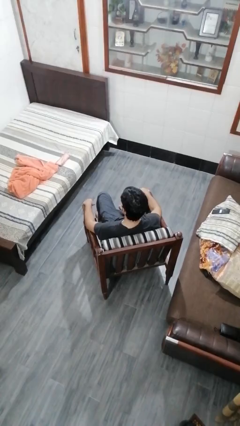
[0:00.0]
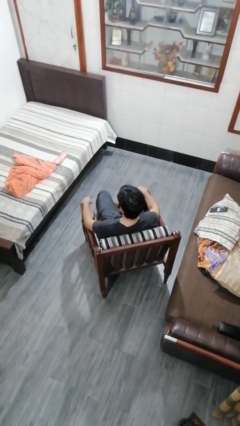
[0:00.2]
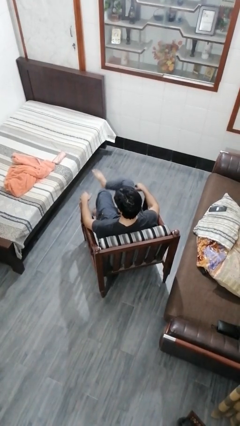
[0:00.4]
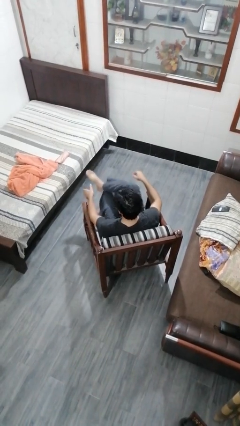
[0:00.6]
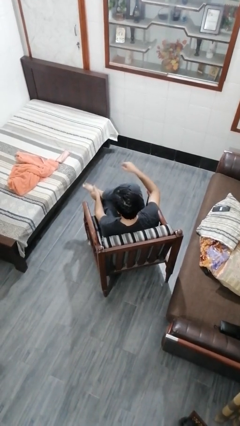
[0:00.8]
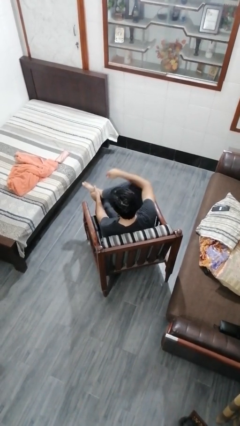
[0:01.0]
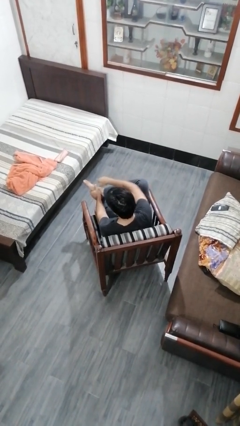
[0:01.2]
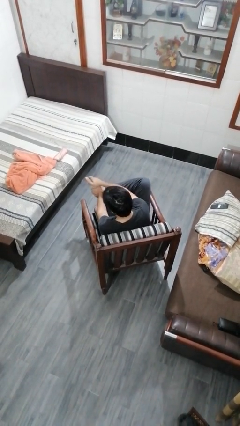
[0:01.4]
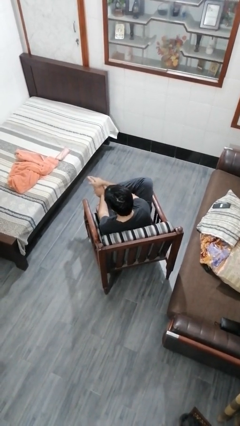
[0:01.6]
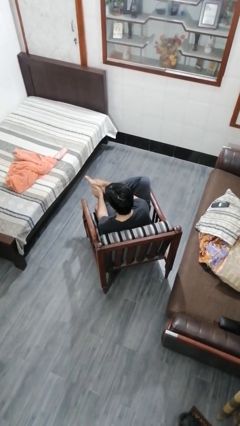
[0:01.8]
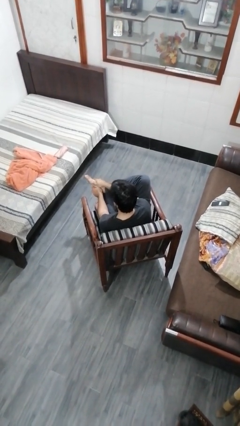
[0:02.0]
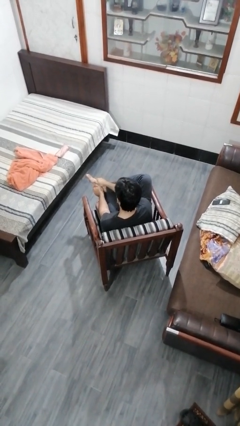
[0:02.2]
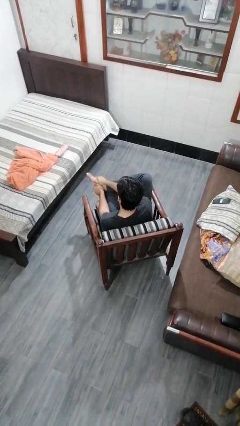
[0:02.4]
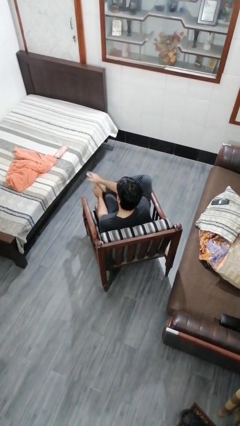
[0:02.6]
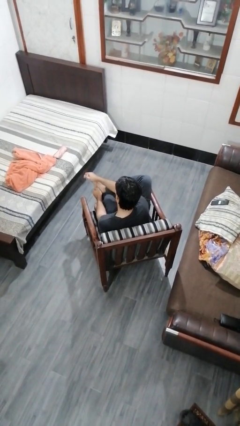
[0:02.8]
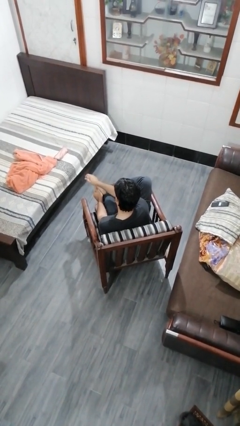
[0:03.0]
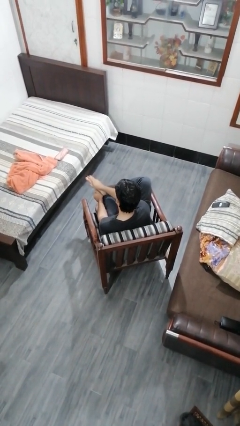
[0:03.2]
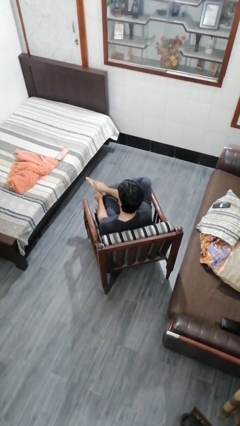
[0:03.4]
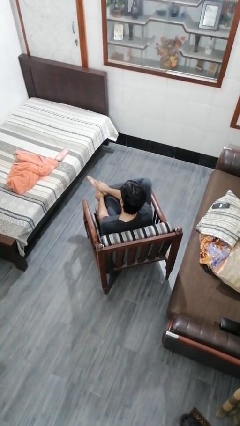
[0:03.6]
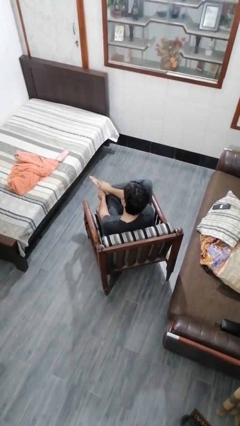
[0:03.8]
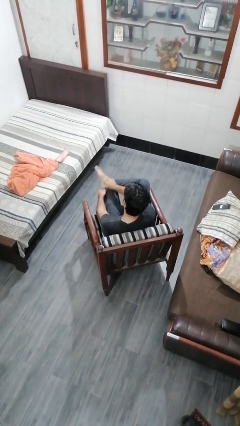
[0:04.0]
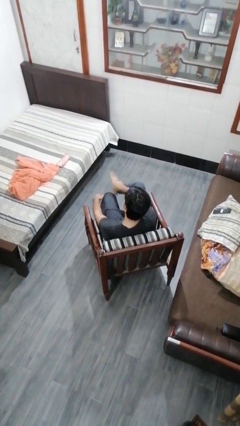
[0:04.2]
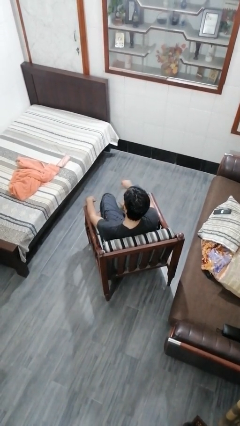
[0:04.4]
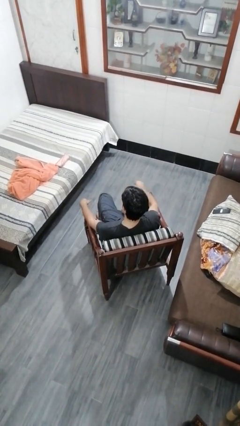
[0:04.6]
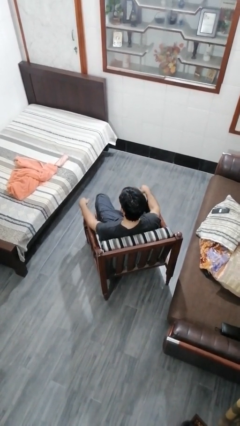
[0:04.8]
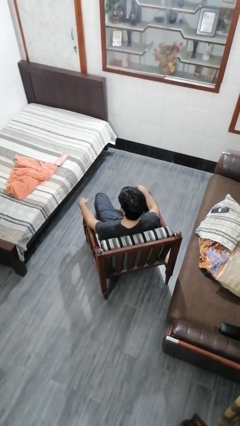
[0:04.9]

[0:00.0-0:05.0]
person rubs foot

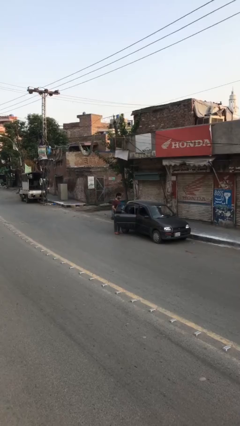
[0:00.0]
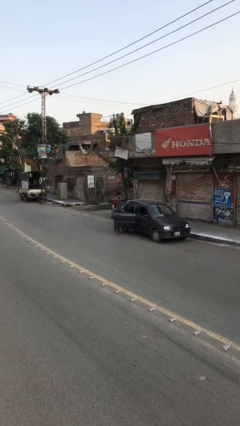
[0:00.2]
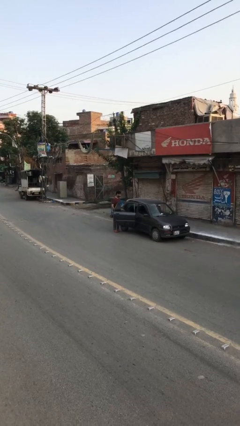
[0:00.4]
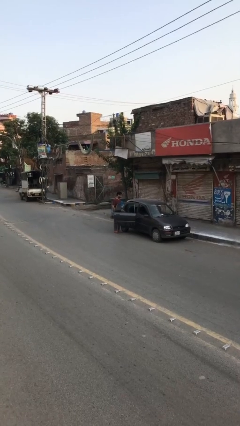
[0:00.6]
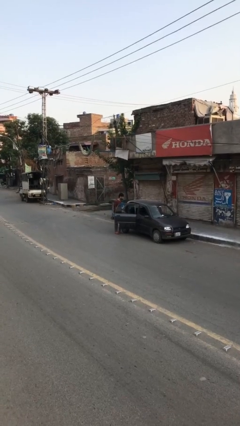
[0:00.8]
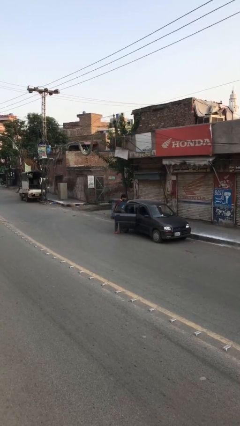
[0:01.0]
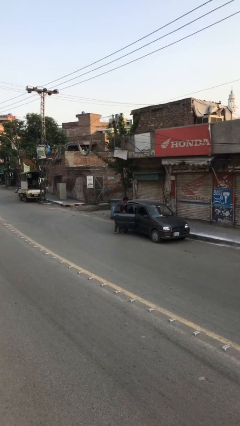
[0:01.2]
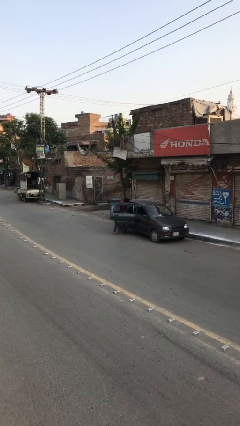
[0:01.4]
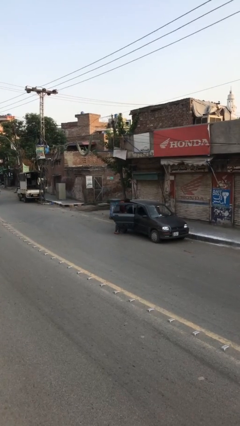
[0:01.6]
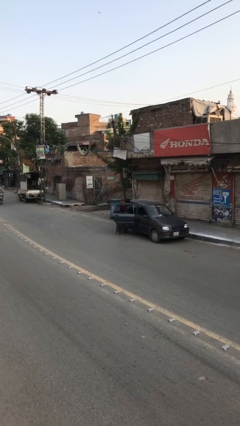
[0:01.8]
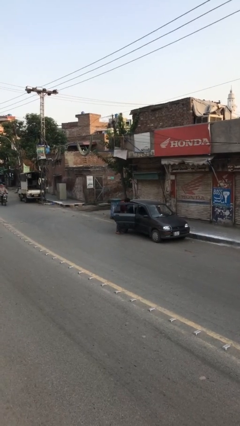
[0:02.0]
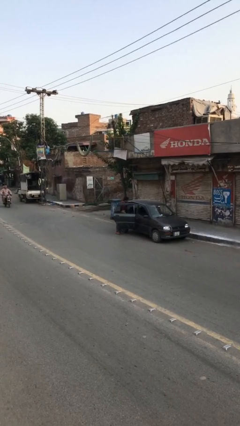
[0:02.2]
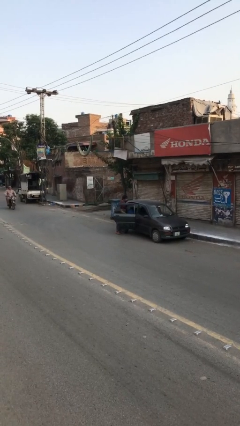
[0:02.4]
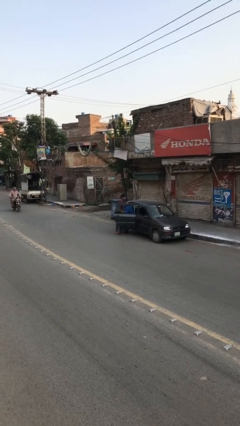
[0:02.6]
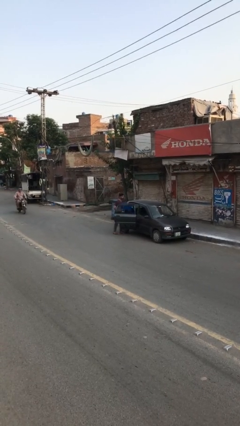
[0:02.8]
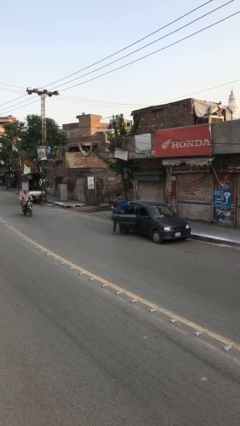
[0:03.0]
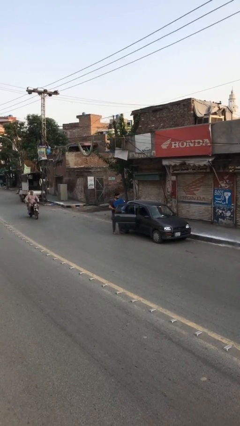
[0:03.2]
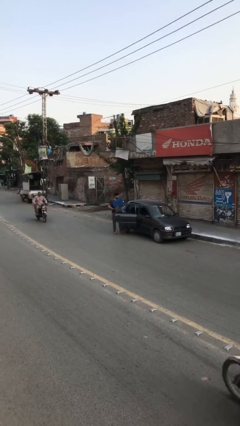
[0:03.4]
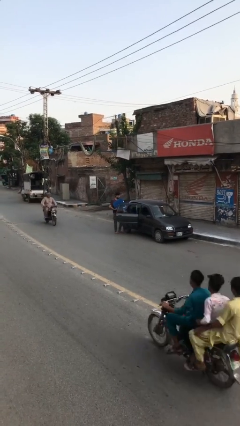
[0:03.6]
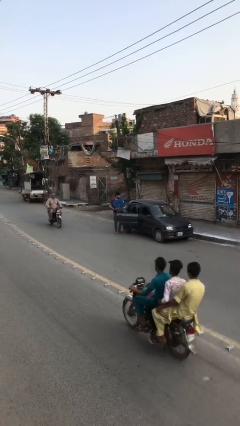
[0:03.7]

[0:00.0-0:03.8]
person unloads car

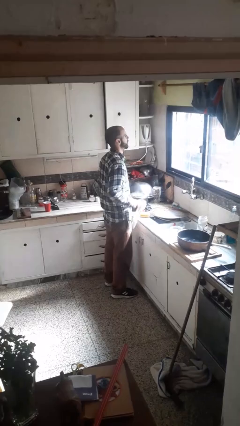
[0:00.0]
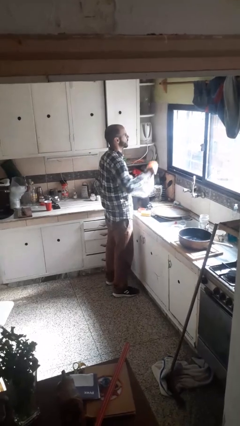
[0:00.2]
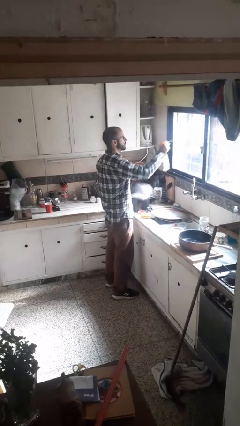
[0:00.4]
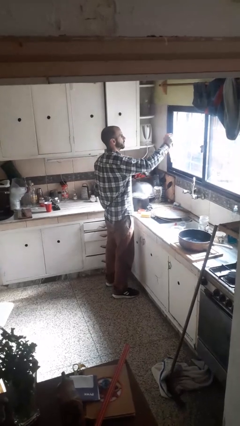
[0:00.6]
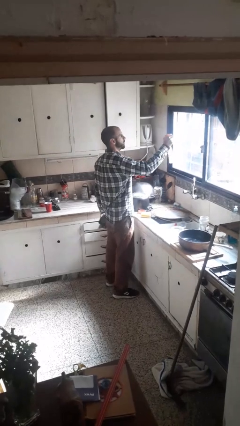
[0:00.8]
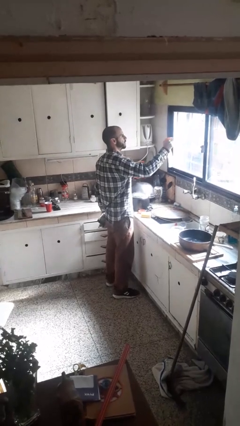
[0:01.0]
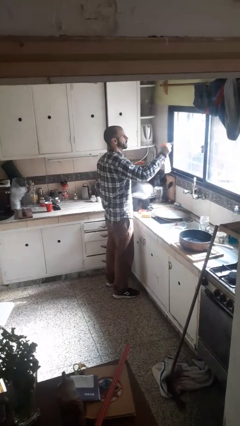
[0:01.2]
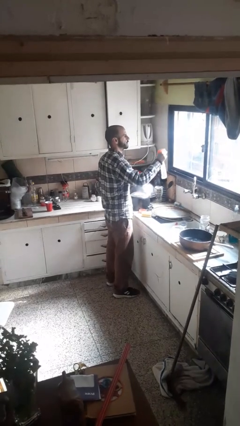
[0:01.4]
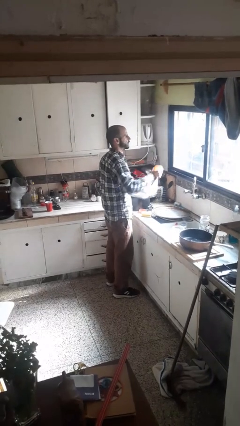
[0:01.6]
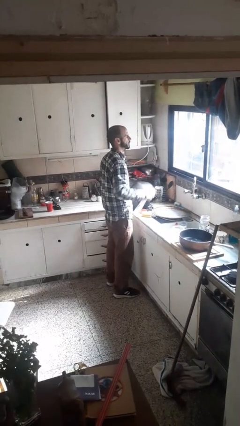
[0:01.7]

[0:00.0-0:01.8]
person sprays from bottle

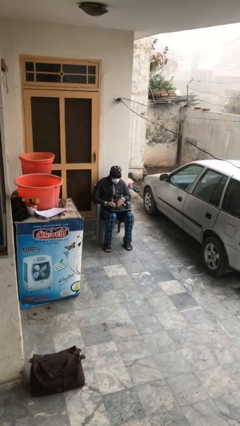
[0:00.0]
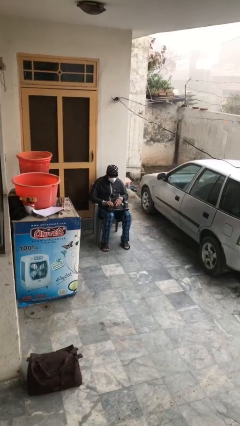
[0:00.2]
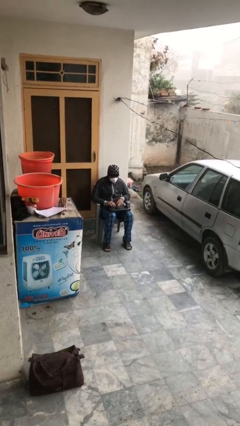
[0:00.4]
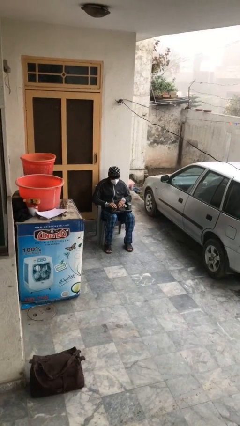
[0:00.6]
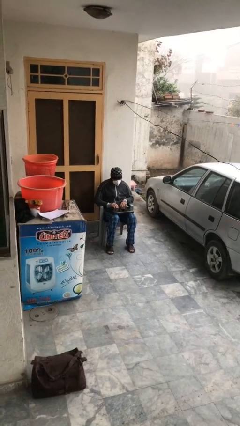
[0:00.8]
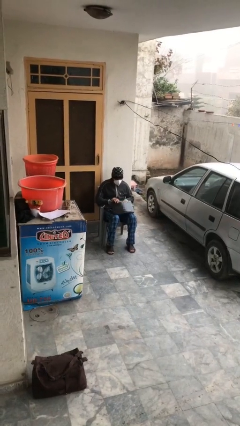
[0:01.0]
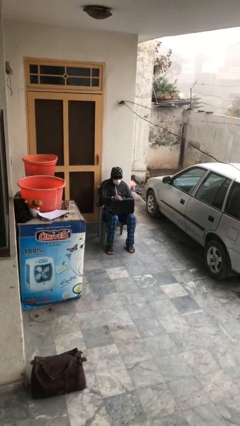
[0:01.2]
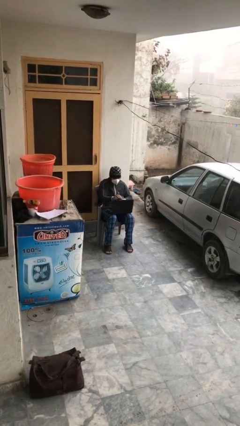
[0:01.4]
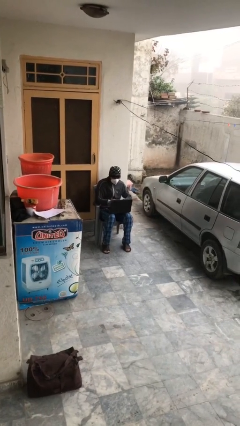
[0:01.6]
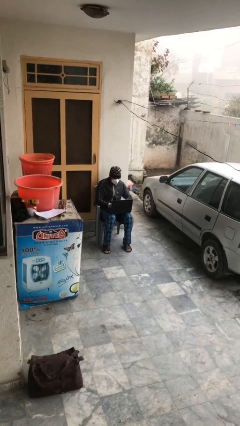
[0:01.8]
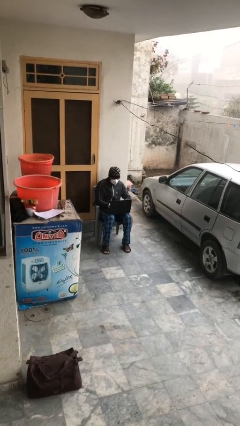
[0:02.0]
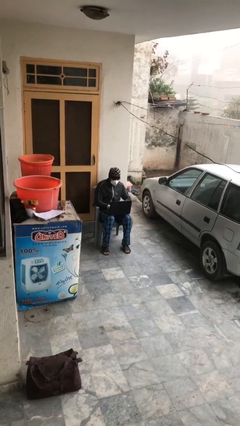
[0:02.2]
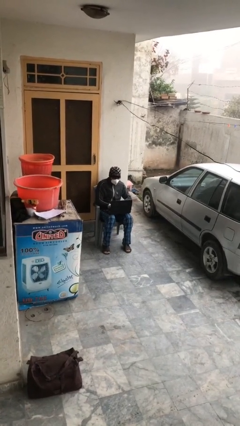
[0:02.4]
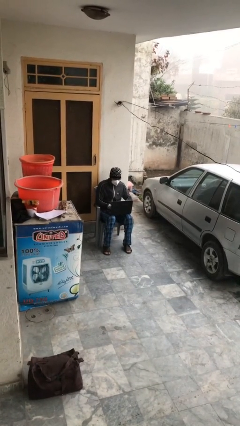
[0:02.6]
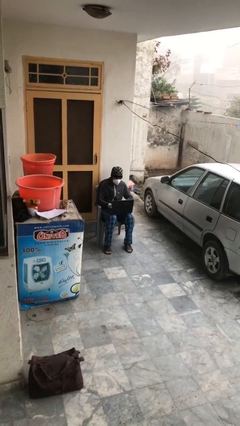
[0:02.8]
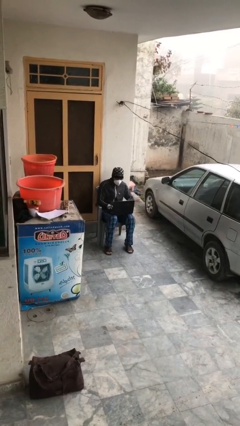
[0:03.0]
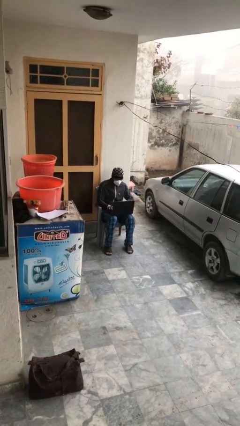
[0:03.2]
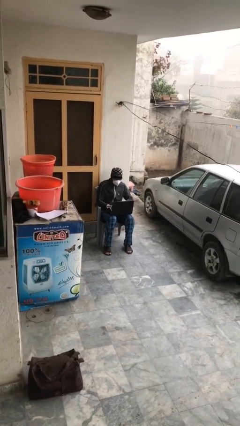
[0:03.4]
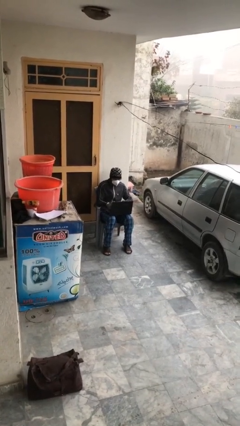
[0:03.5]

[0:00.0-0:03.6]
person interacts with laptop

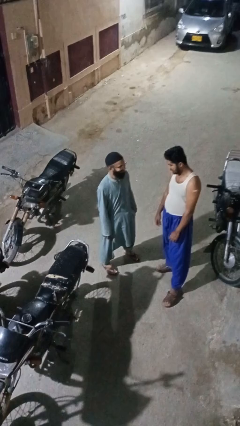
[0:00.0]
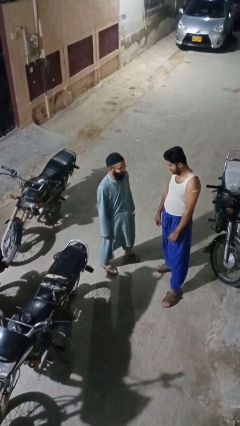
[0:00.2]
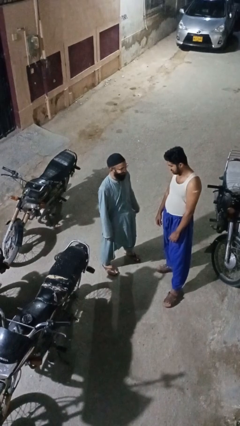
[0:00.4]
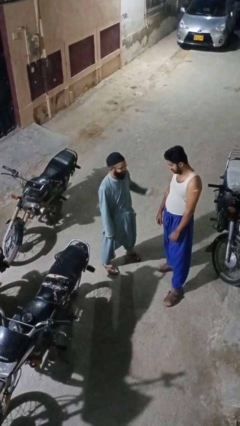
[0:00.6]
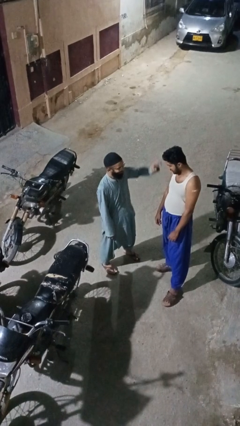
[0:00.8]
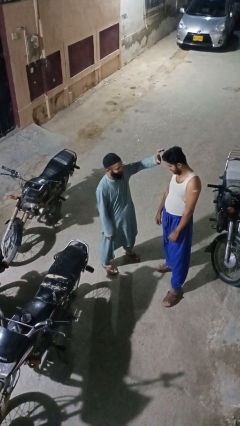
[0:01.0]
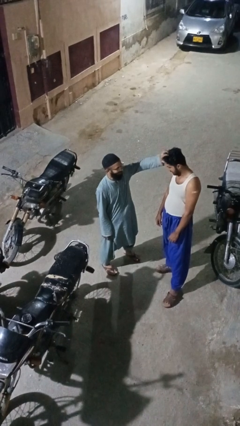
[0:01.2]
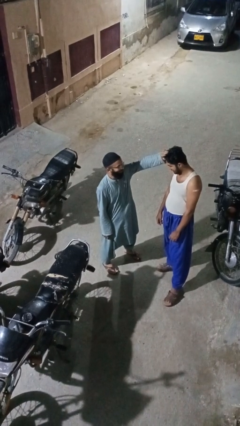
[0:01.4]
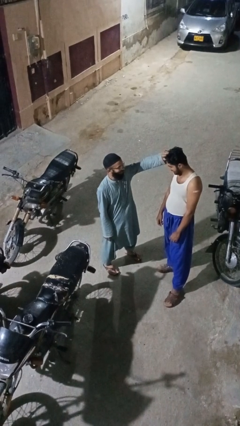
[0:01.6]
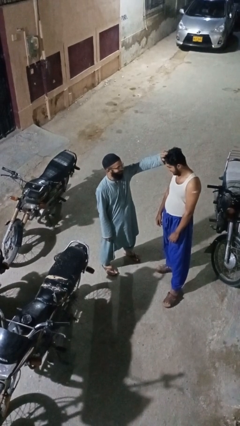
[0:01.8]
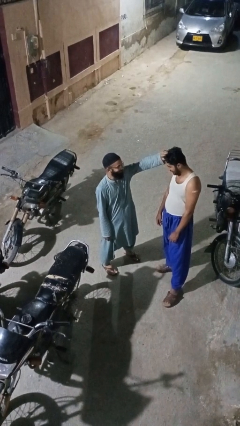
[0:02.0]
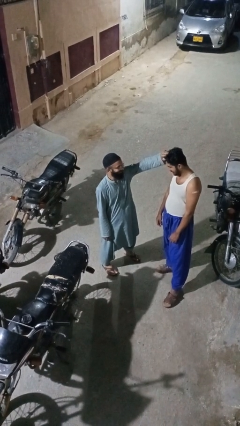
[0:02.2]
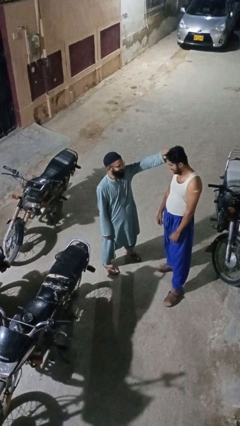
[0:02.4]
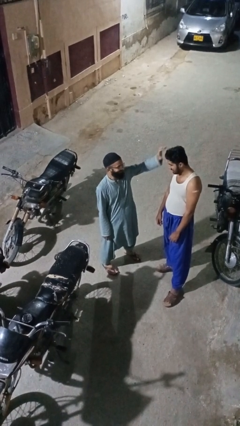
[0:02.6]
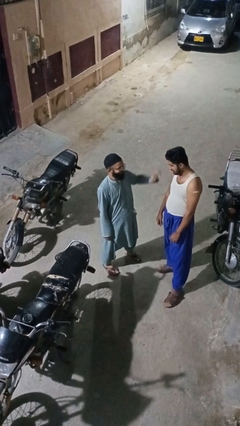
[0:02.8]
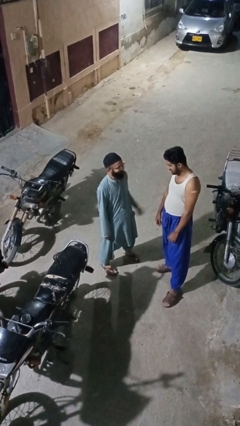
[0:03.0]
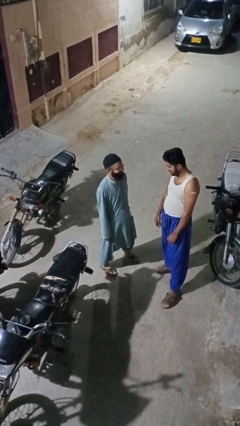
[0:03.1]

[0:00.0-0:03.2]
person grabs person by hair
